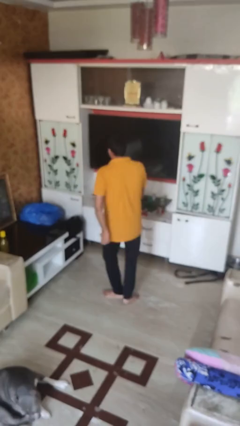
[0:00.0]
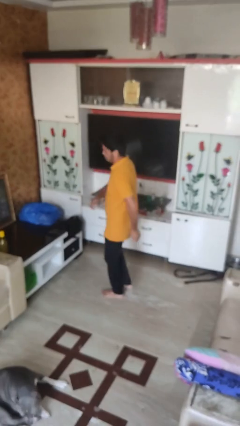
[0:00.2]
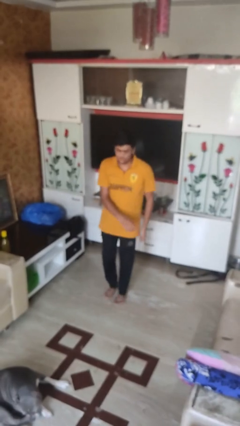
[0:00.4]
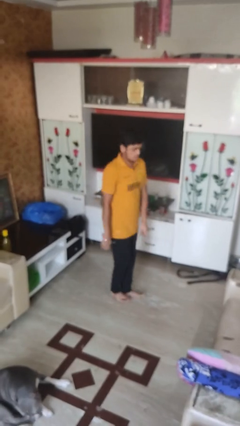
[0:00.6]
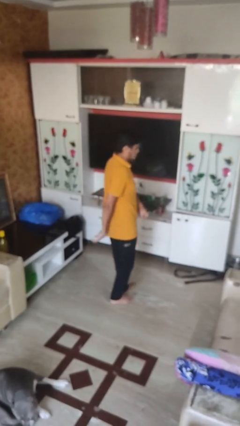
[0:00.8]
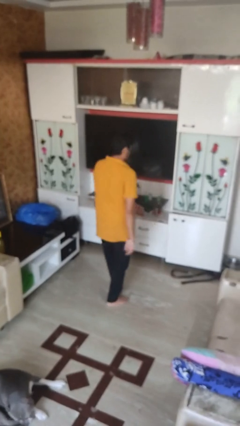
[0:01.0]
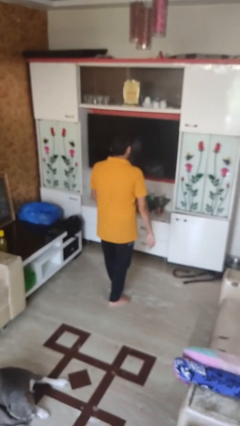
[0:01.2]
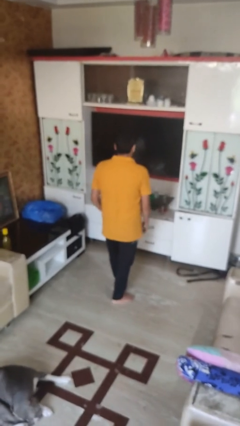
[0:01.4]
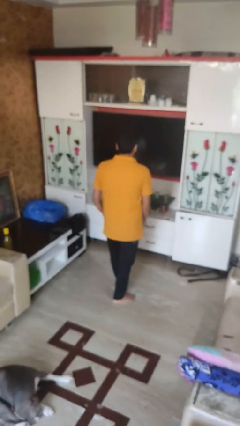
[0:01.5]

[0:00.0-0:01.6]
person twirls

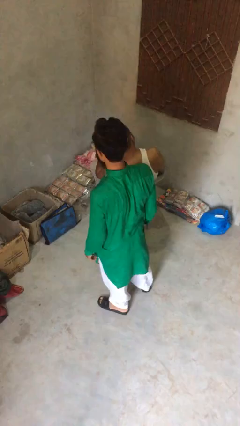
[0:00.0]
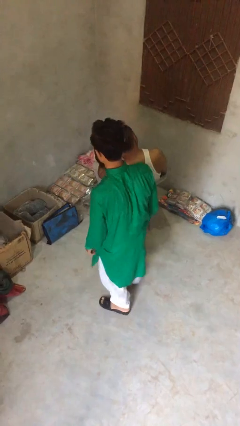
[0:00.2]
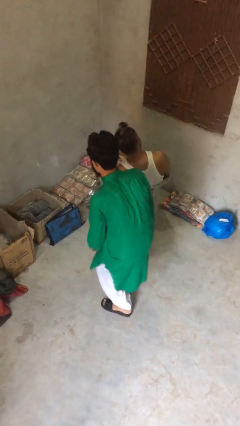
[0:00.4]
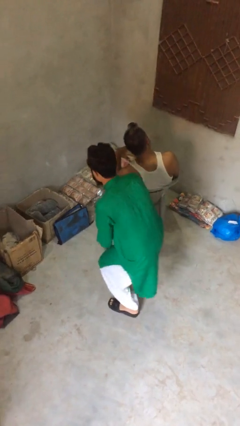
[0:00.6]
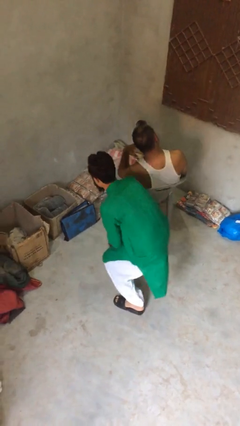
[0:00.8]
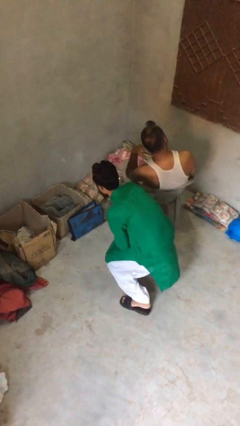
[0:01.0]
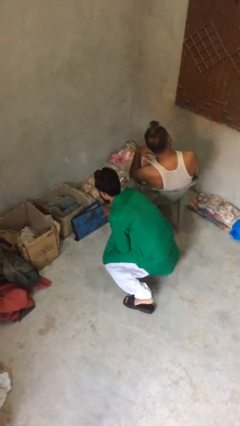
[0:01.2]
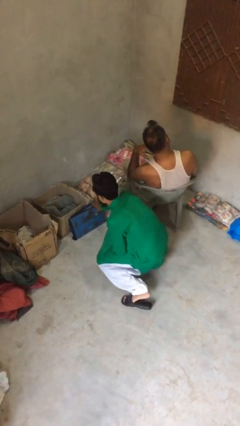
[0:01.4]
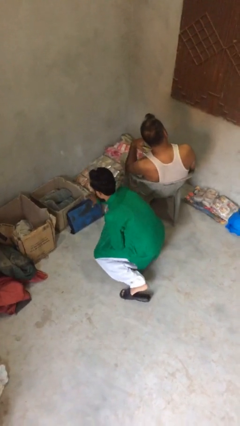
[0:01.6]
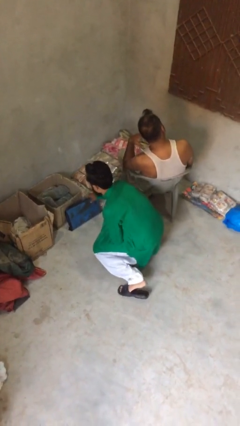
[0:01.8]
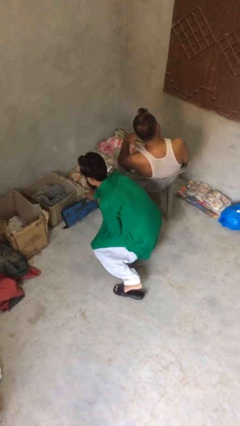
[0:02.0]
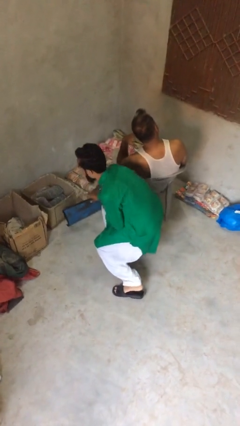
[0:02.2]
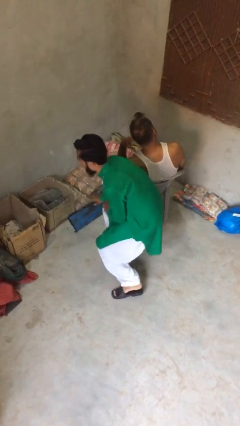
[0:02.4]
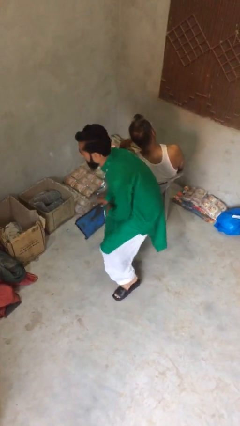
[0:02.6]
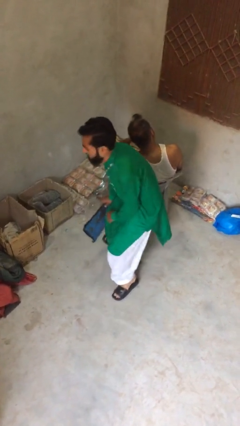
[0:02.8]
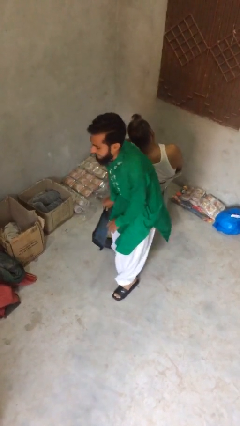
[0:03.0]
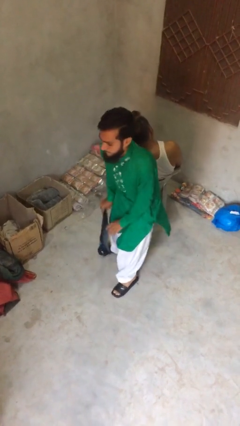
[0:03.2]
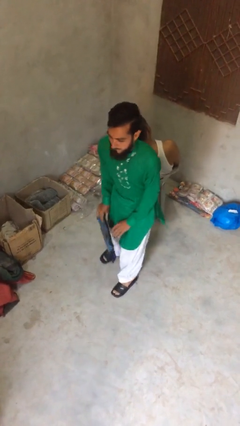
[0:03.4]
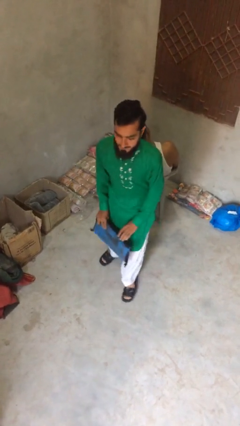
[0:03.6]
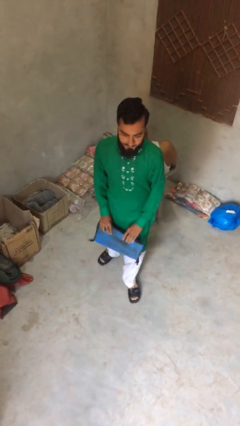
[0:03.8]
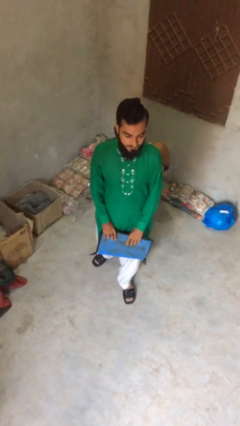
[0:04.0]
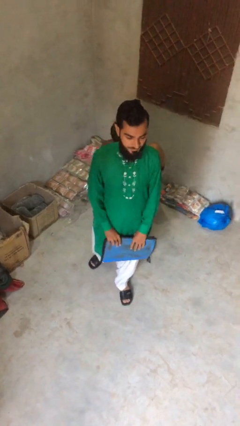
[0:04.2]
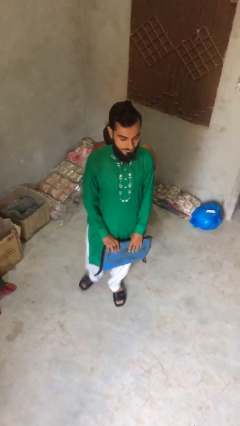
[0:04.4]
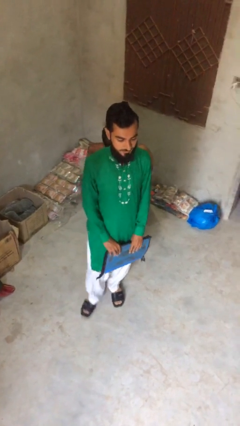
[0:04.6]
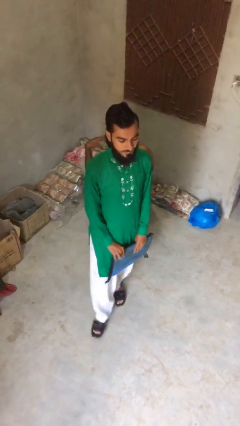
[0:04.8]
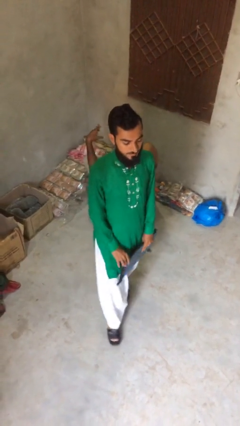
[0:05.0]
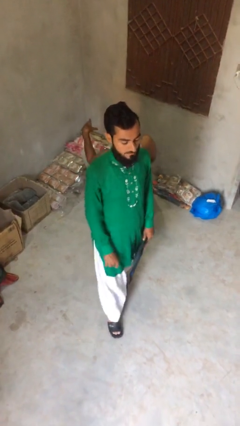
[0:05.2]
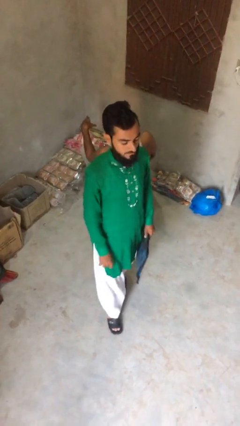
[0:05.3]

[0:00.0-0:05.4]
person steals object from person

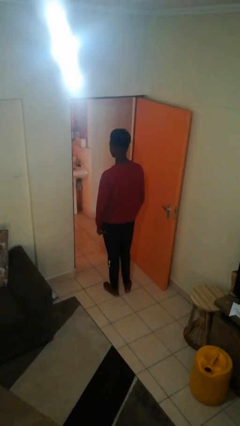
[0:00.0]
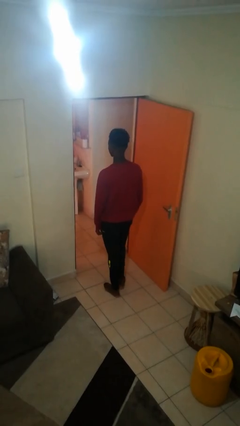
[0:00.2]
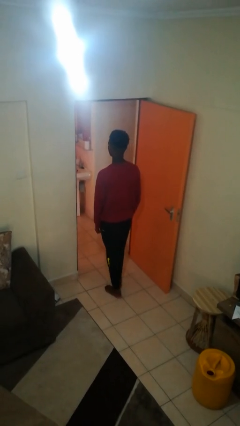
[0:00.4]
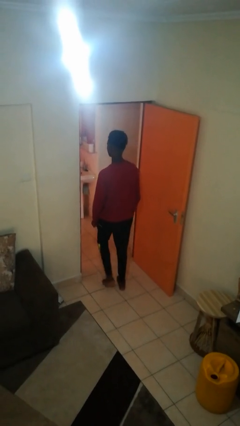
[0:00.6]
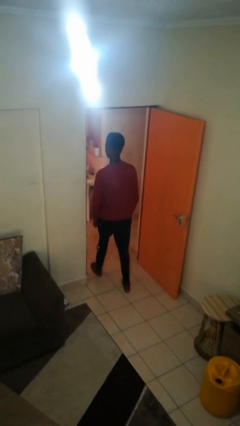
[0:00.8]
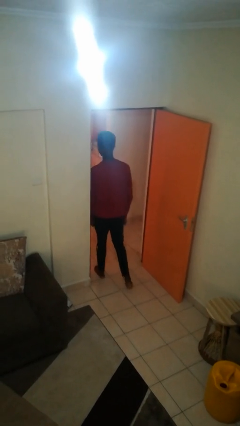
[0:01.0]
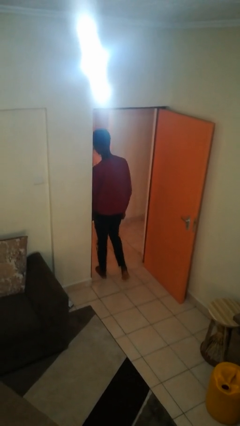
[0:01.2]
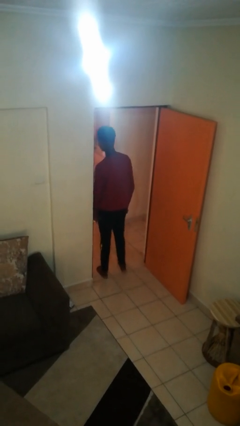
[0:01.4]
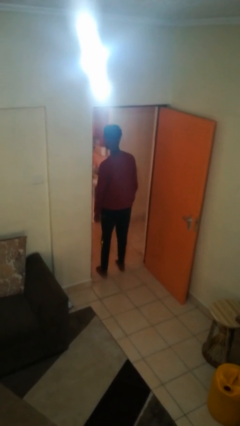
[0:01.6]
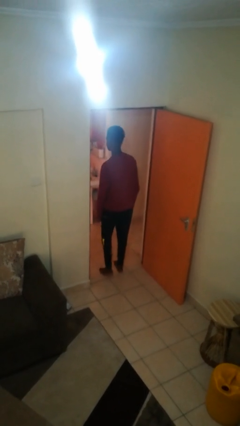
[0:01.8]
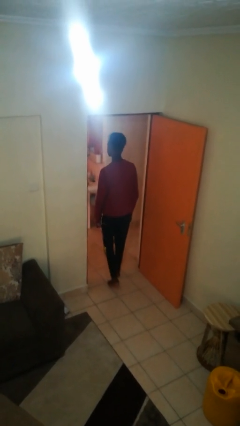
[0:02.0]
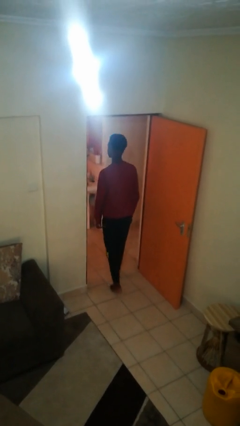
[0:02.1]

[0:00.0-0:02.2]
person bumps into wall

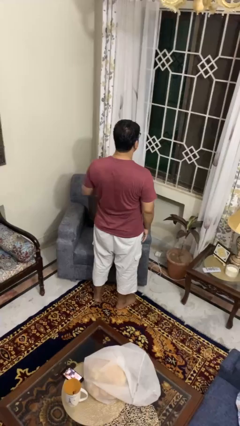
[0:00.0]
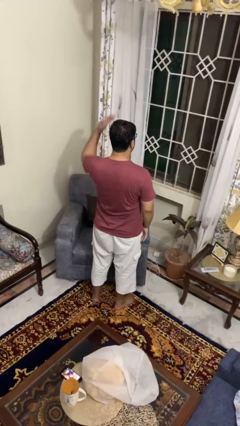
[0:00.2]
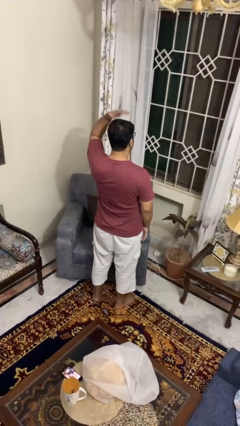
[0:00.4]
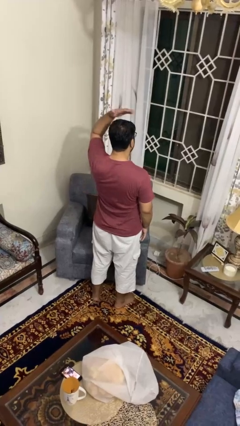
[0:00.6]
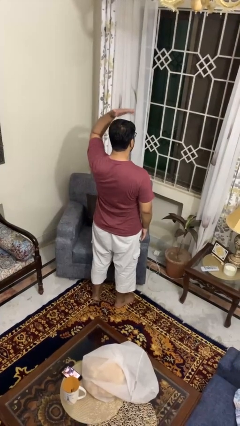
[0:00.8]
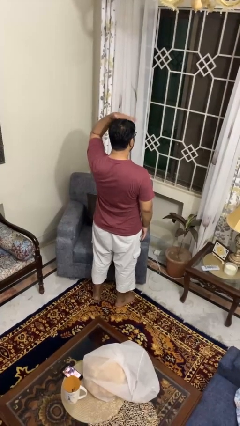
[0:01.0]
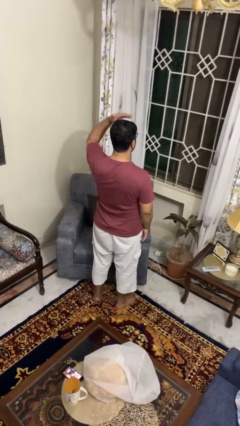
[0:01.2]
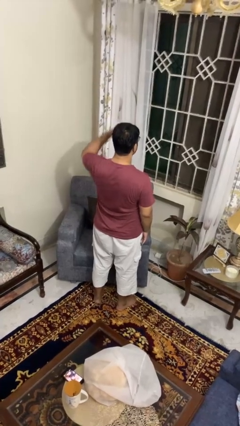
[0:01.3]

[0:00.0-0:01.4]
person pats head

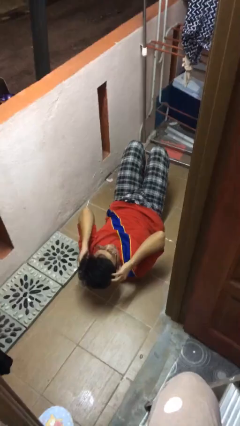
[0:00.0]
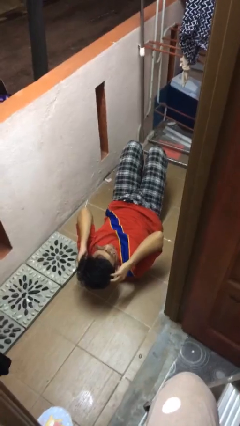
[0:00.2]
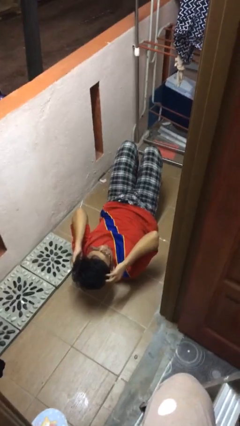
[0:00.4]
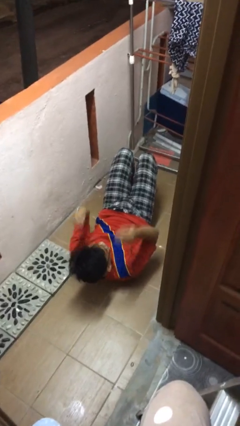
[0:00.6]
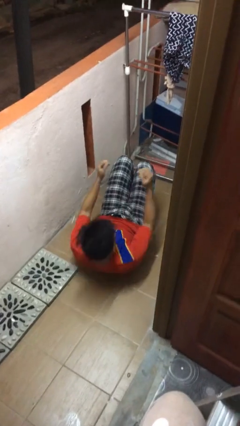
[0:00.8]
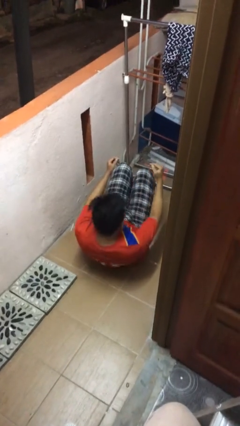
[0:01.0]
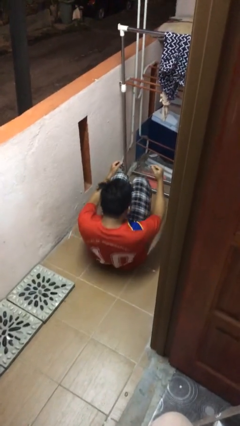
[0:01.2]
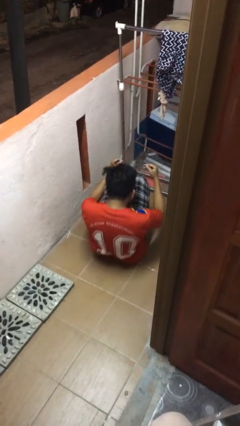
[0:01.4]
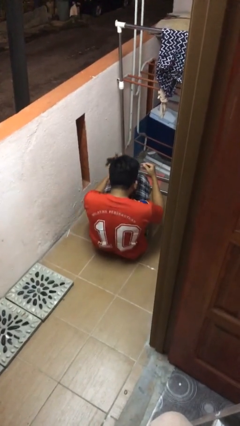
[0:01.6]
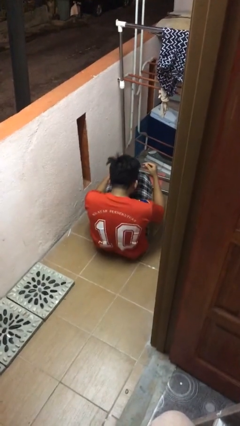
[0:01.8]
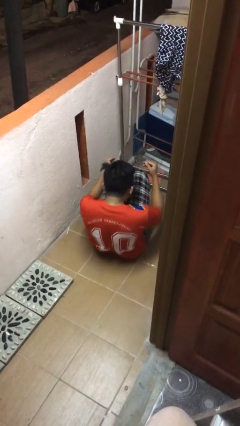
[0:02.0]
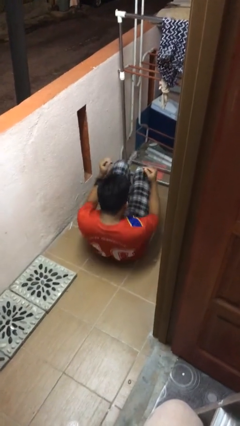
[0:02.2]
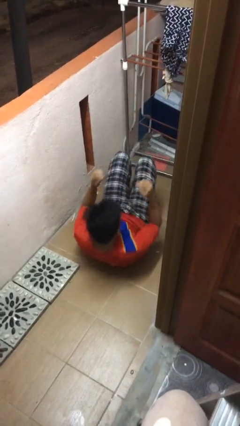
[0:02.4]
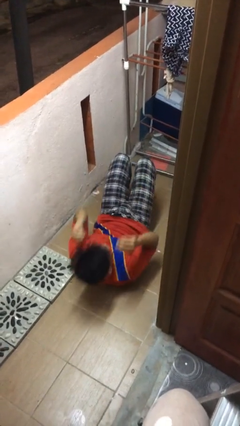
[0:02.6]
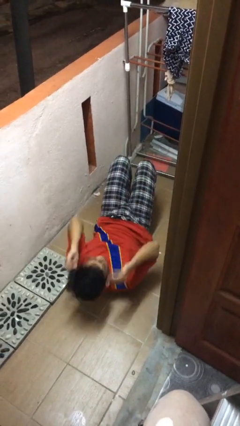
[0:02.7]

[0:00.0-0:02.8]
person exercises with situp

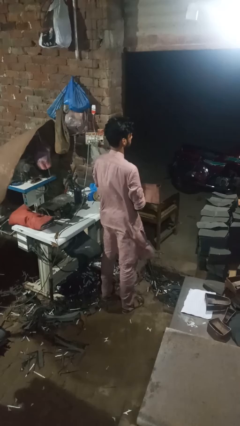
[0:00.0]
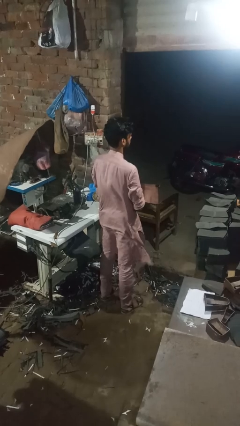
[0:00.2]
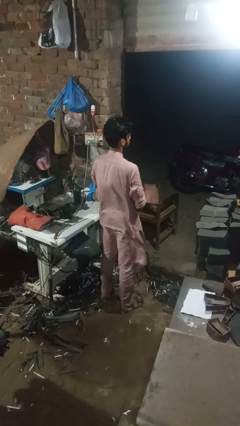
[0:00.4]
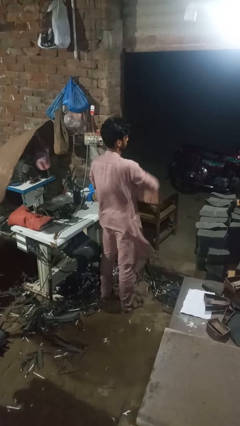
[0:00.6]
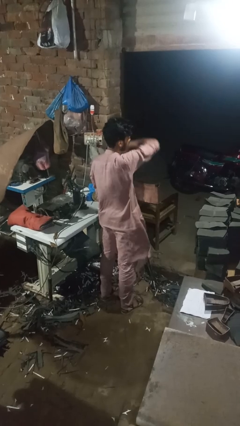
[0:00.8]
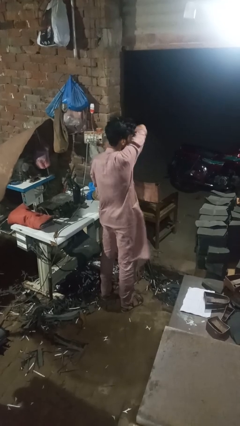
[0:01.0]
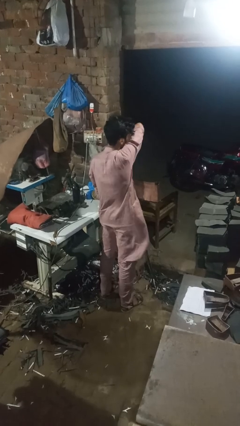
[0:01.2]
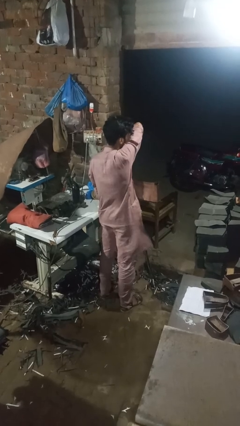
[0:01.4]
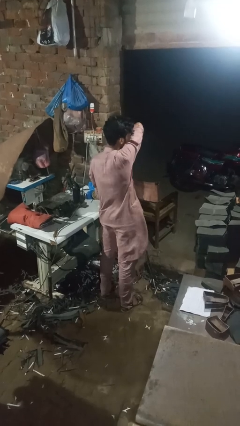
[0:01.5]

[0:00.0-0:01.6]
person sneezes into arm

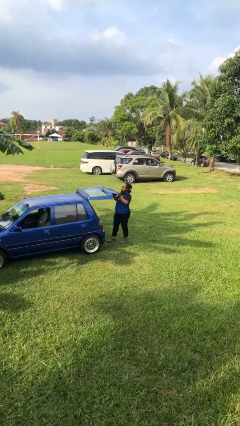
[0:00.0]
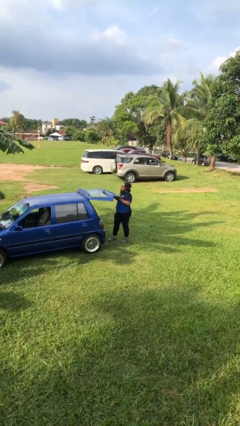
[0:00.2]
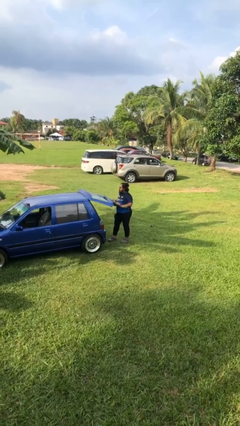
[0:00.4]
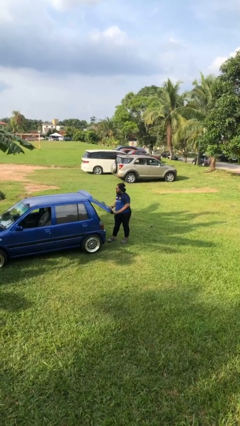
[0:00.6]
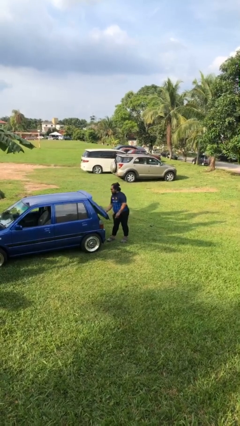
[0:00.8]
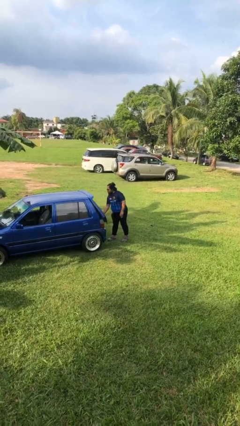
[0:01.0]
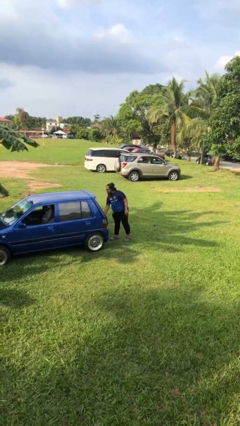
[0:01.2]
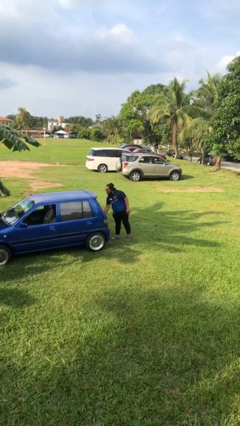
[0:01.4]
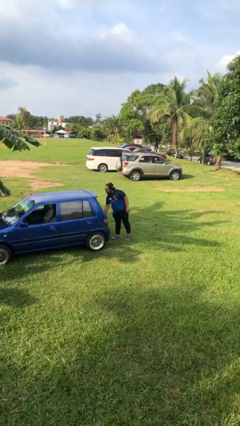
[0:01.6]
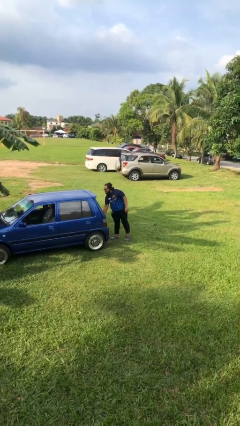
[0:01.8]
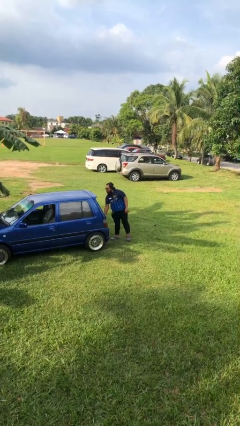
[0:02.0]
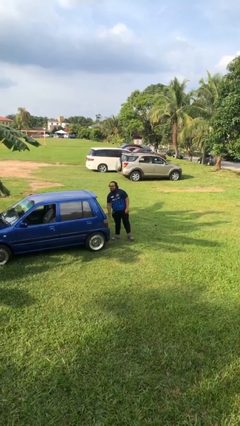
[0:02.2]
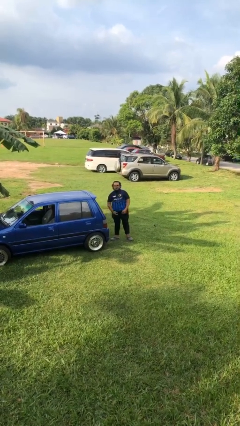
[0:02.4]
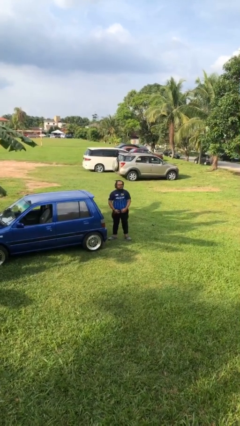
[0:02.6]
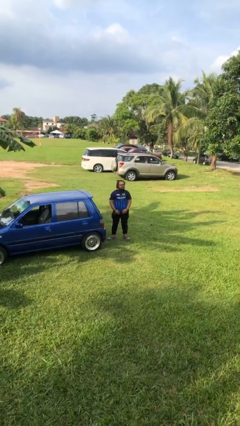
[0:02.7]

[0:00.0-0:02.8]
person closes car trunk
